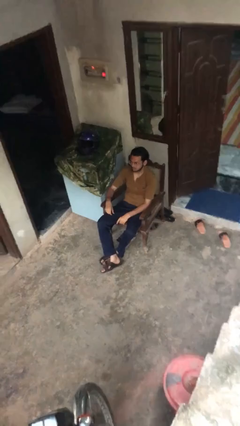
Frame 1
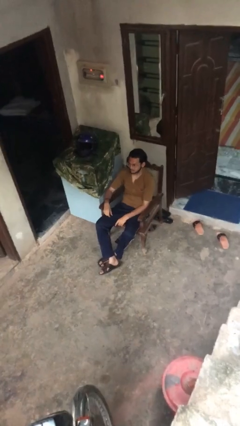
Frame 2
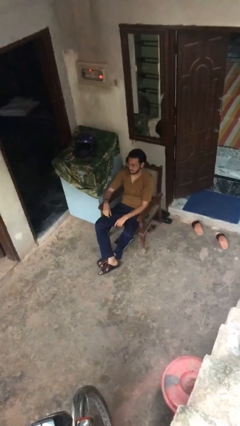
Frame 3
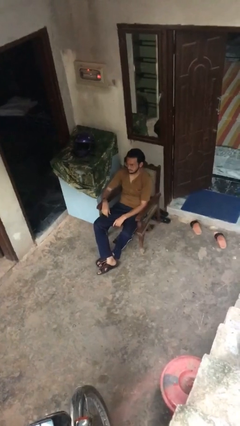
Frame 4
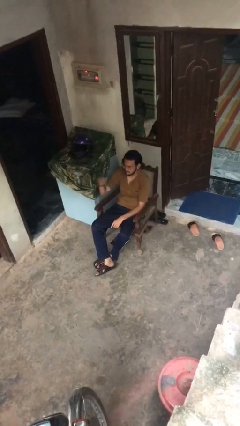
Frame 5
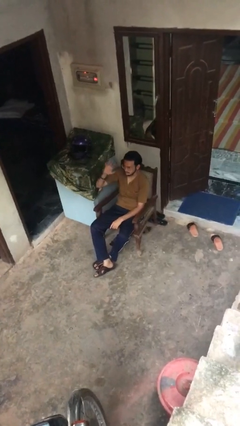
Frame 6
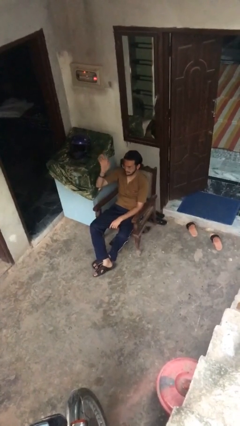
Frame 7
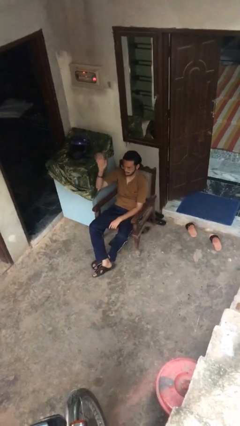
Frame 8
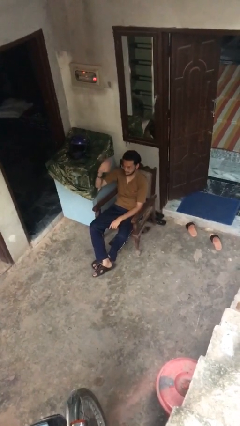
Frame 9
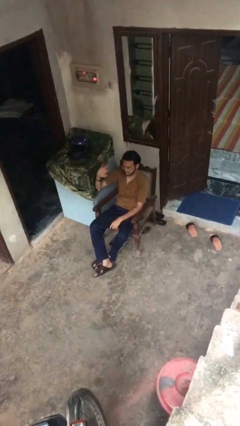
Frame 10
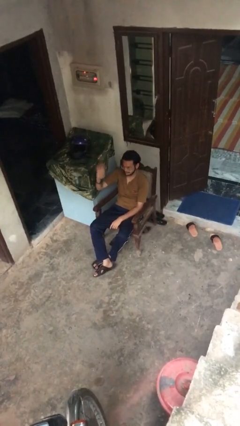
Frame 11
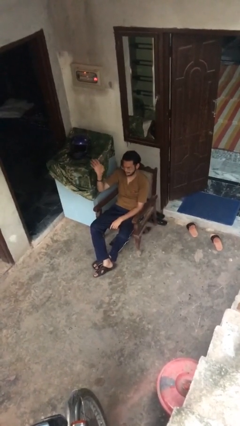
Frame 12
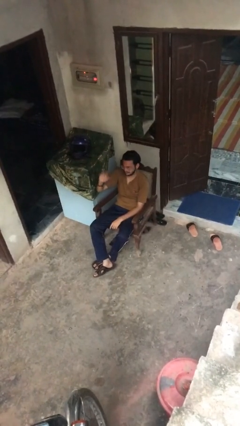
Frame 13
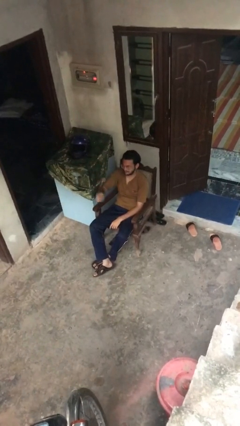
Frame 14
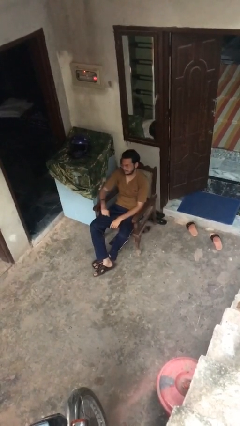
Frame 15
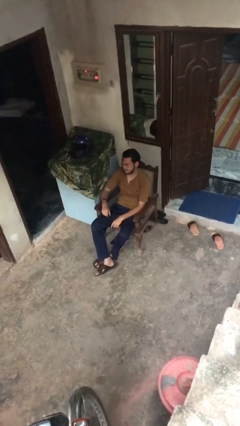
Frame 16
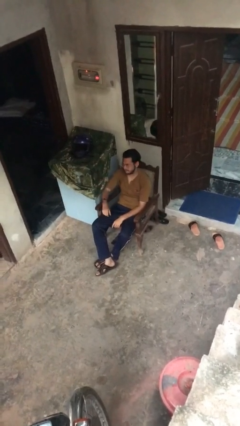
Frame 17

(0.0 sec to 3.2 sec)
person waves at person

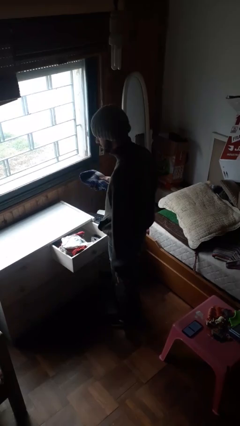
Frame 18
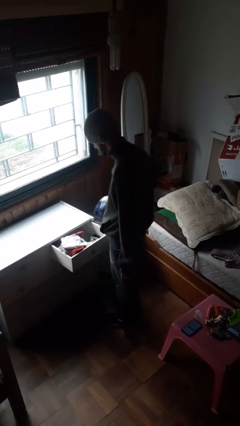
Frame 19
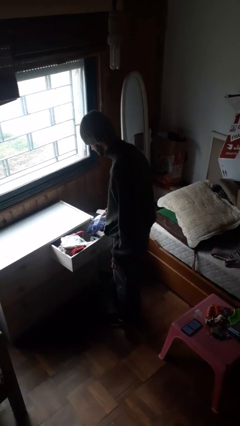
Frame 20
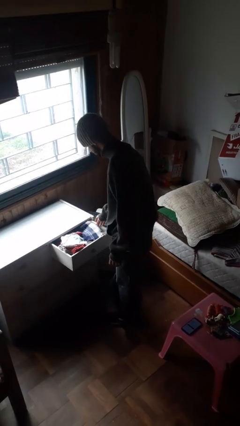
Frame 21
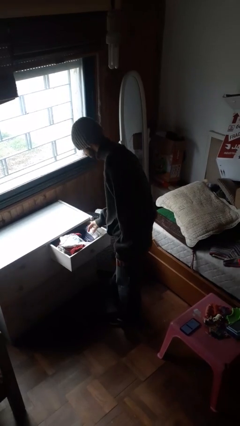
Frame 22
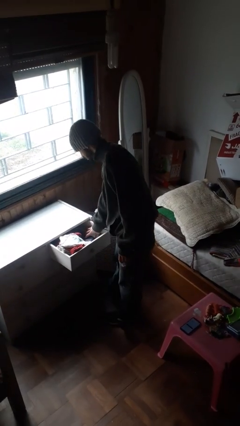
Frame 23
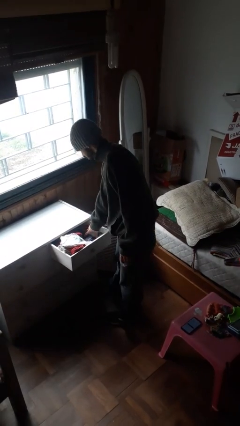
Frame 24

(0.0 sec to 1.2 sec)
person puts clothes into dresser

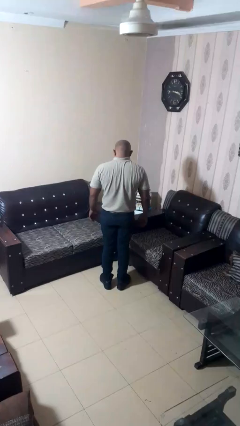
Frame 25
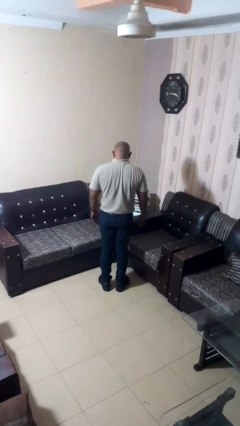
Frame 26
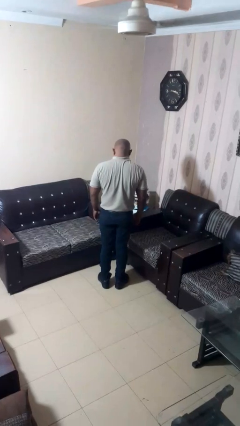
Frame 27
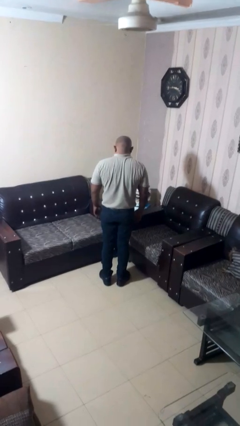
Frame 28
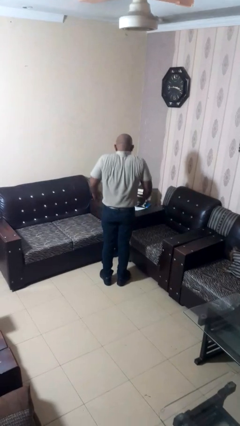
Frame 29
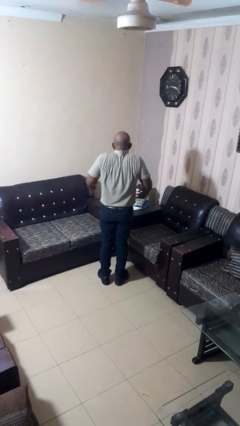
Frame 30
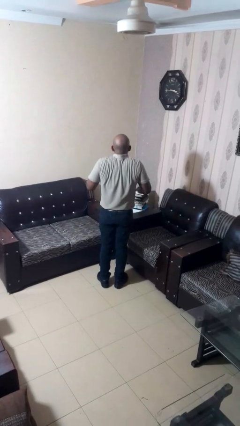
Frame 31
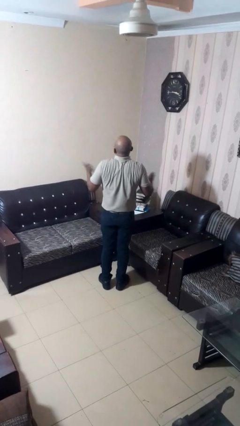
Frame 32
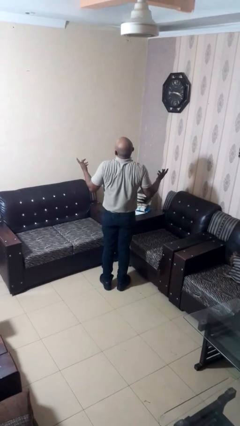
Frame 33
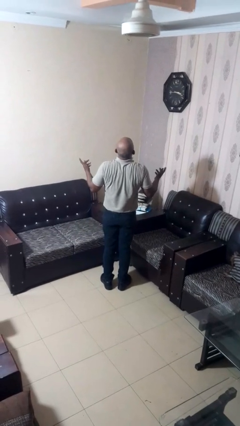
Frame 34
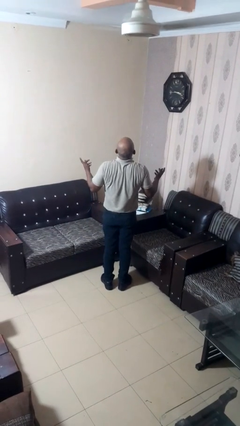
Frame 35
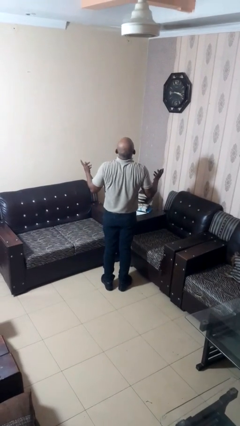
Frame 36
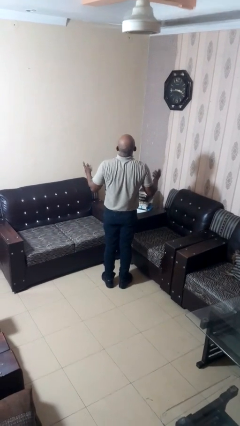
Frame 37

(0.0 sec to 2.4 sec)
person shrugs

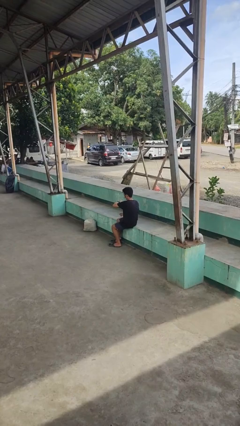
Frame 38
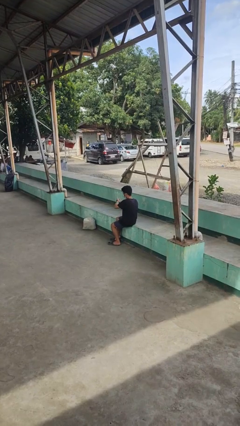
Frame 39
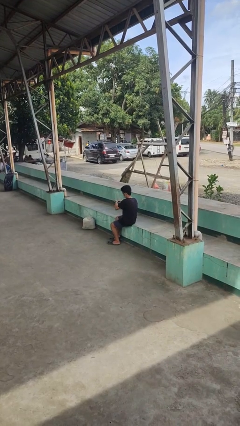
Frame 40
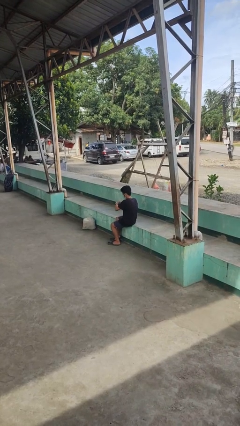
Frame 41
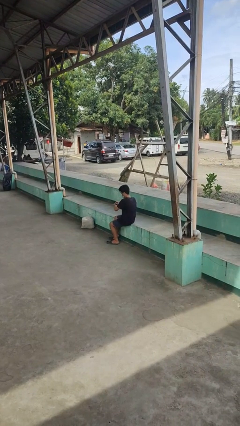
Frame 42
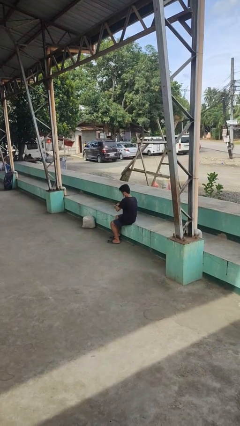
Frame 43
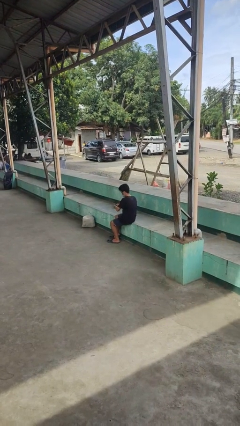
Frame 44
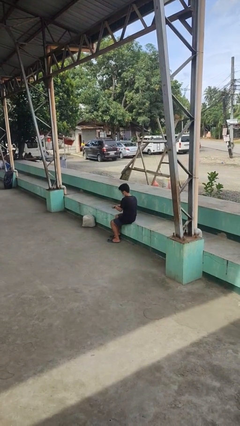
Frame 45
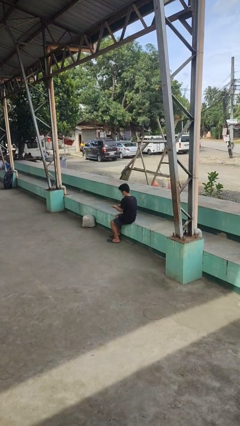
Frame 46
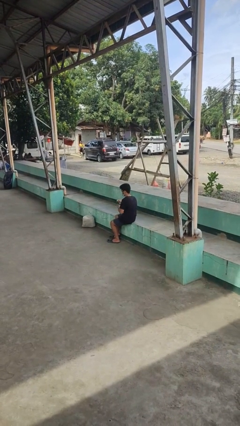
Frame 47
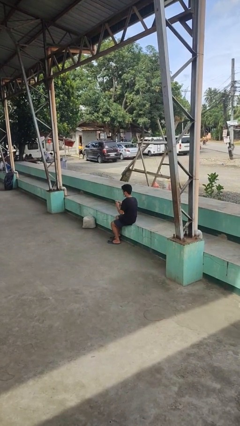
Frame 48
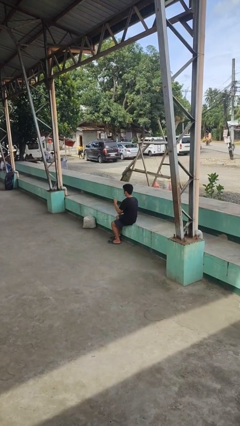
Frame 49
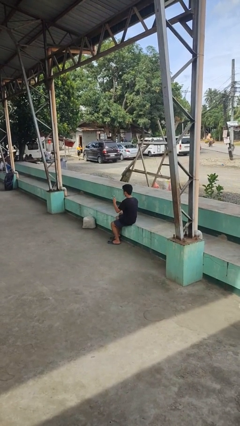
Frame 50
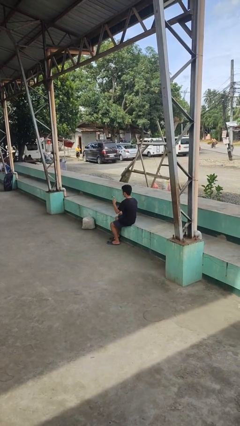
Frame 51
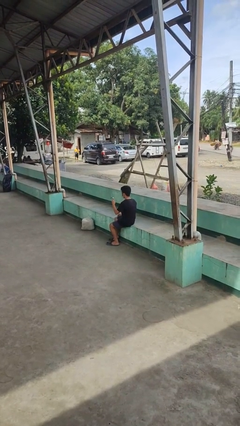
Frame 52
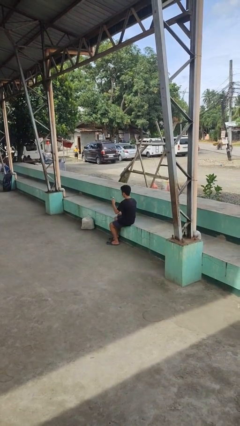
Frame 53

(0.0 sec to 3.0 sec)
person takes off wristwatch

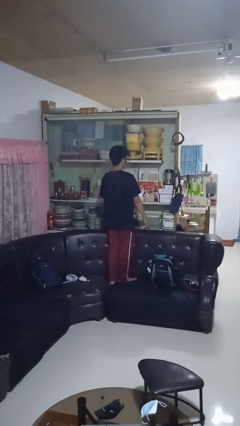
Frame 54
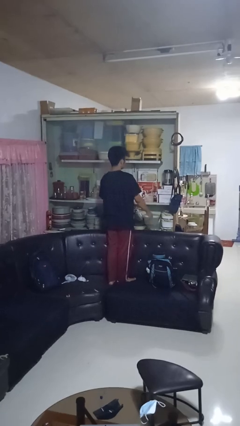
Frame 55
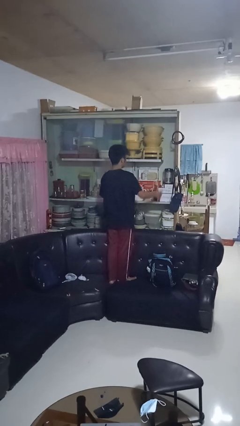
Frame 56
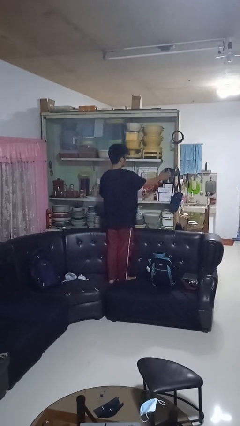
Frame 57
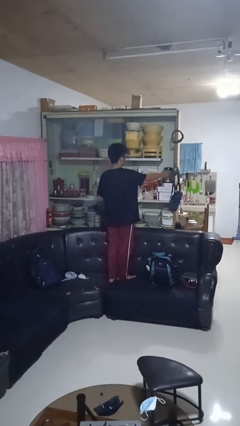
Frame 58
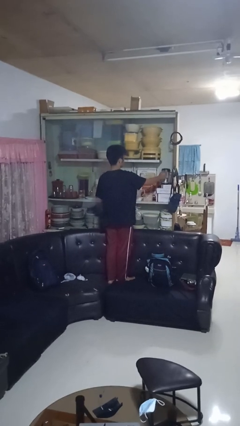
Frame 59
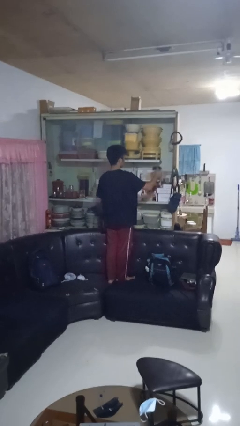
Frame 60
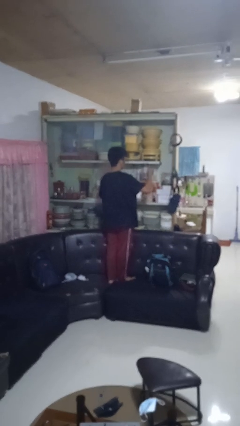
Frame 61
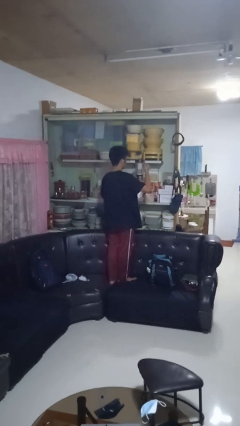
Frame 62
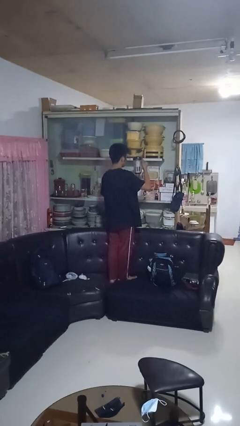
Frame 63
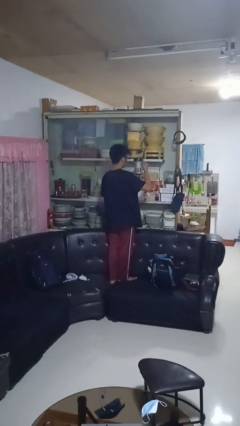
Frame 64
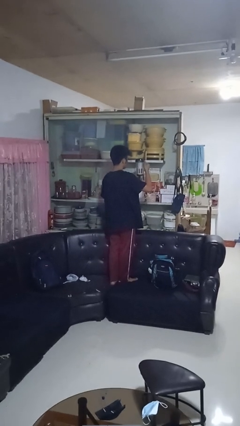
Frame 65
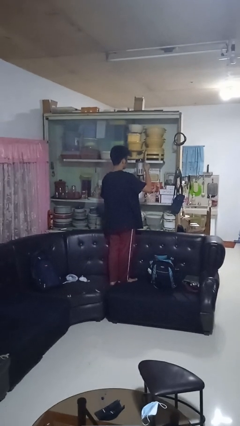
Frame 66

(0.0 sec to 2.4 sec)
person picks up object from cabinet

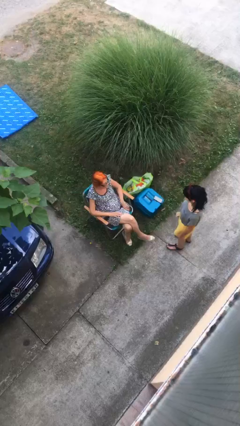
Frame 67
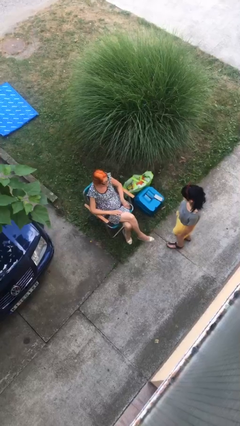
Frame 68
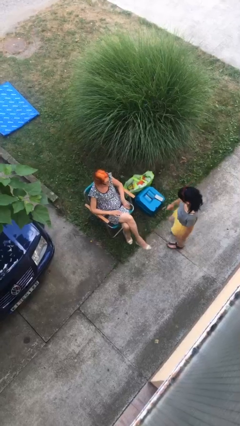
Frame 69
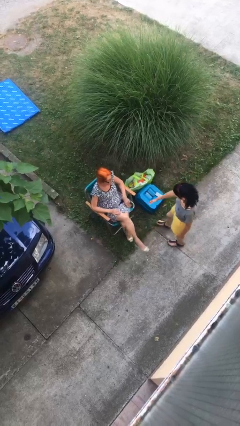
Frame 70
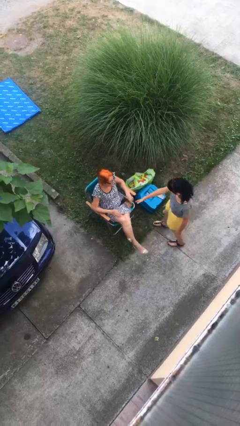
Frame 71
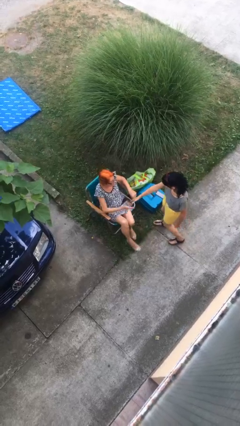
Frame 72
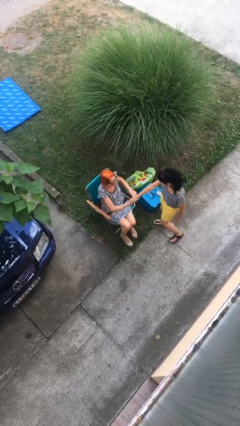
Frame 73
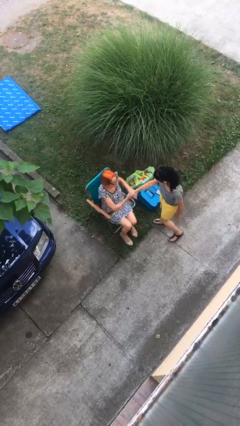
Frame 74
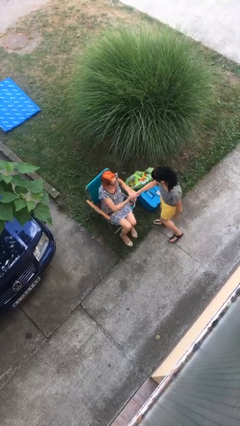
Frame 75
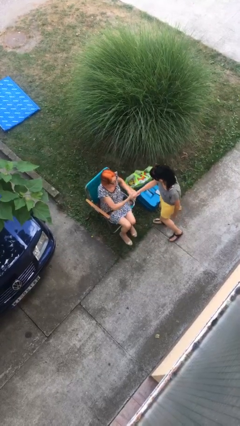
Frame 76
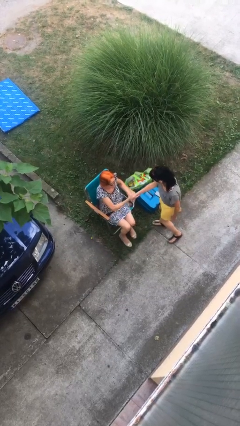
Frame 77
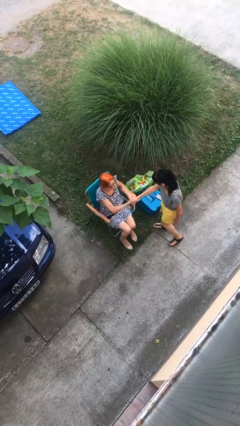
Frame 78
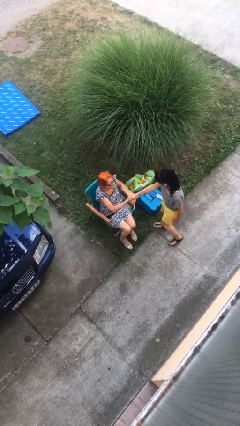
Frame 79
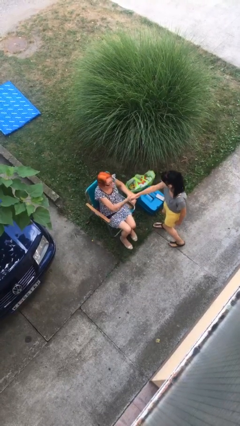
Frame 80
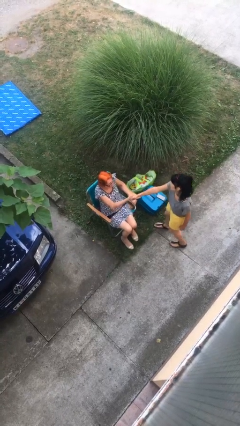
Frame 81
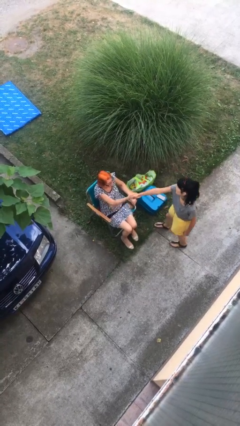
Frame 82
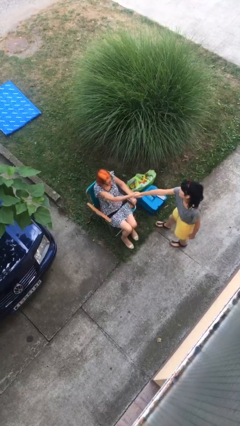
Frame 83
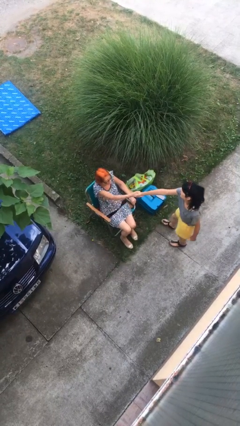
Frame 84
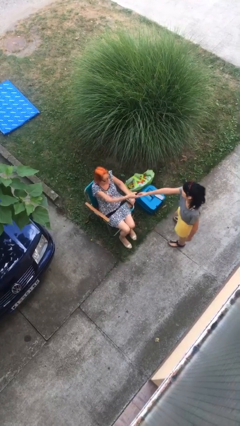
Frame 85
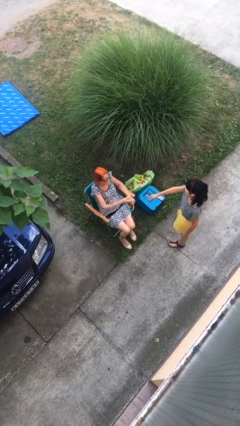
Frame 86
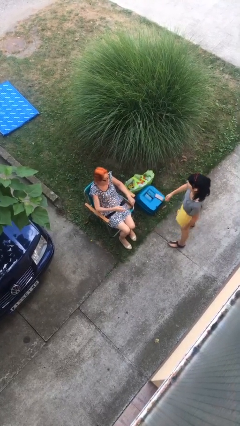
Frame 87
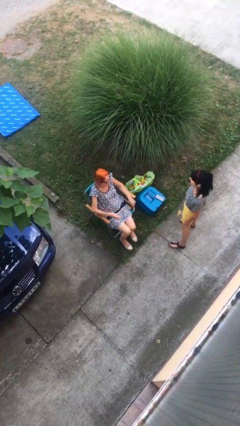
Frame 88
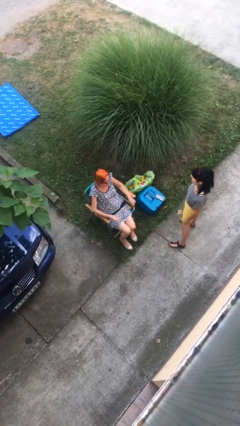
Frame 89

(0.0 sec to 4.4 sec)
person shakes hand

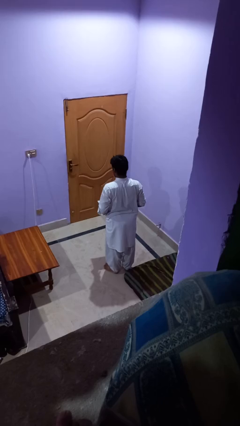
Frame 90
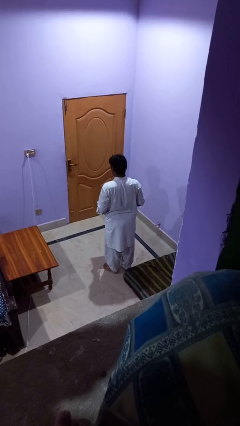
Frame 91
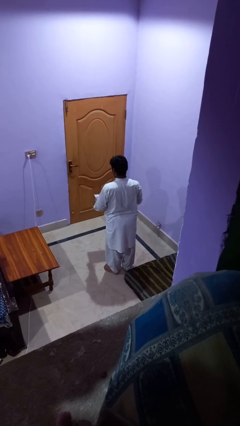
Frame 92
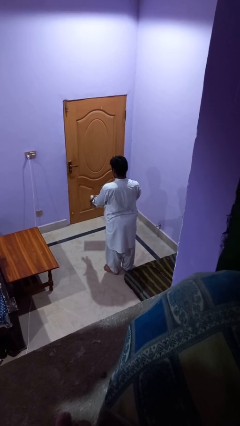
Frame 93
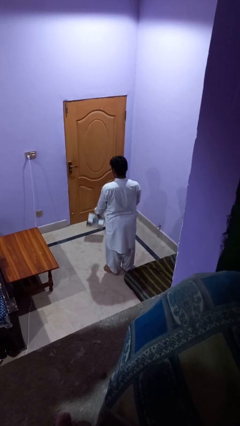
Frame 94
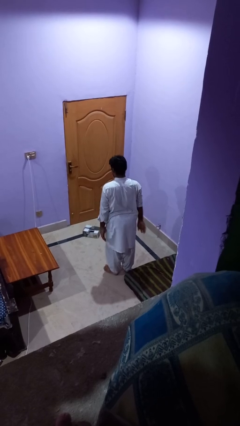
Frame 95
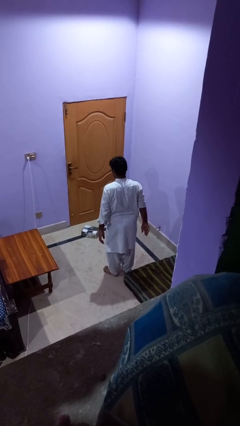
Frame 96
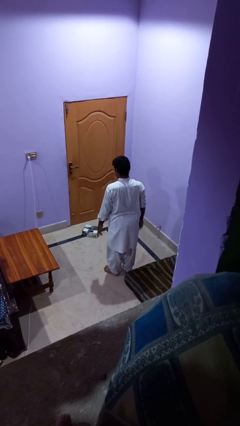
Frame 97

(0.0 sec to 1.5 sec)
person throws object to ground
